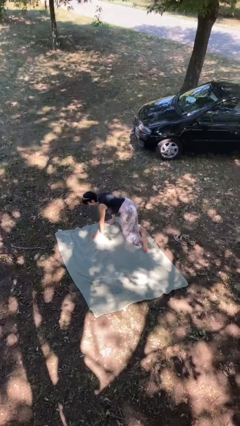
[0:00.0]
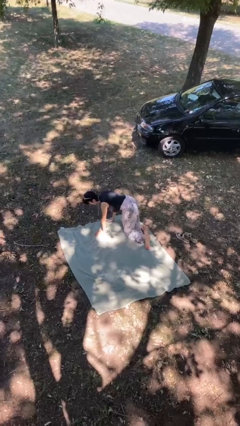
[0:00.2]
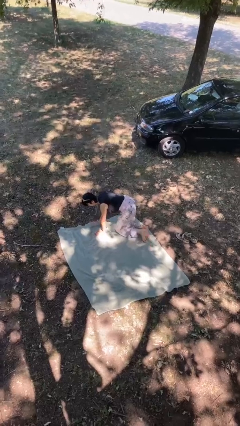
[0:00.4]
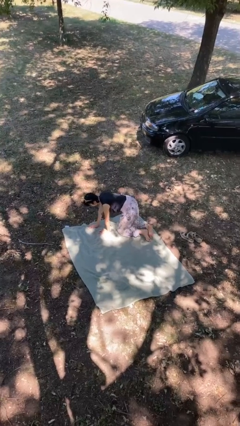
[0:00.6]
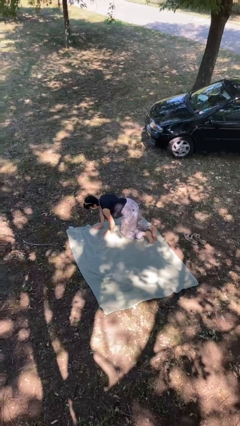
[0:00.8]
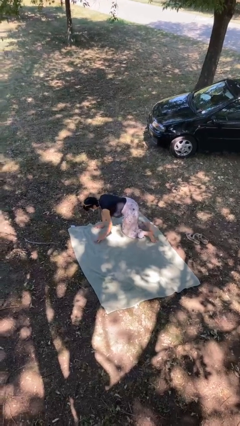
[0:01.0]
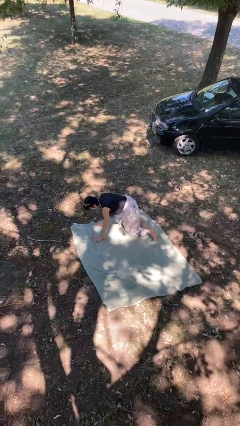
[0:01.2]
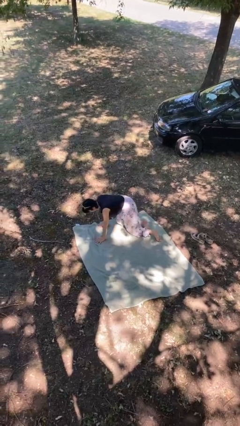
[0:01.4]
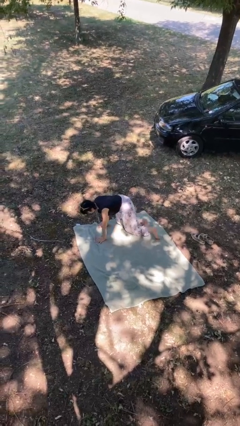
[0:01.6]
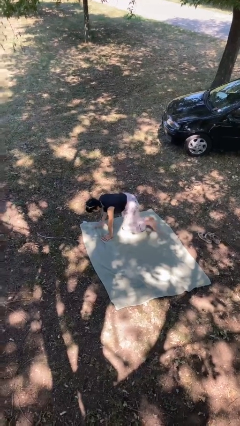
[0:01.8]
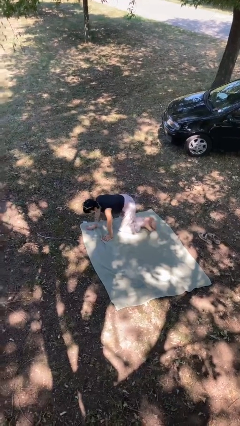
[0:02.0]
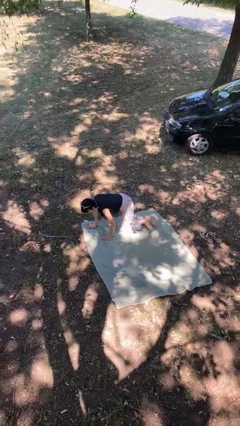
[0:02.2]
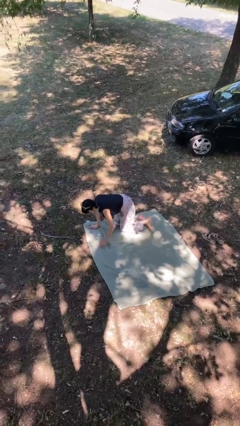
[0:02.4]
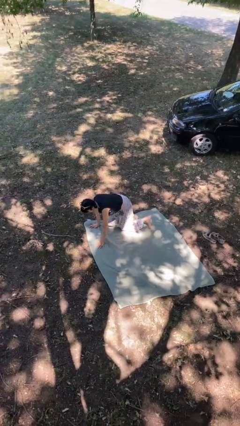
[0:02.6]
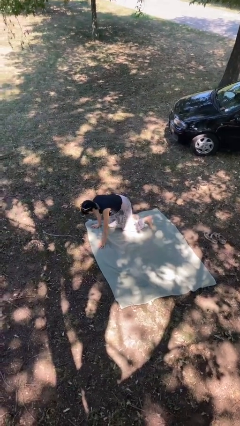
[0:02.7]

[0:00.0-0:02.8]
person crawls

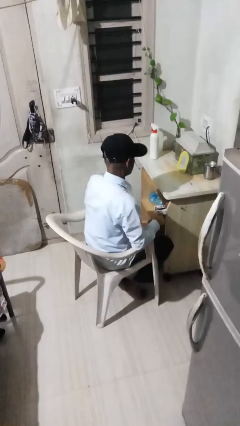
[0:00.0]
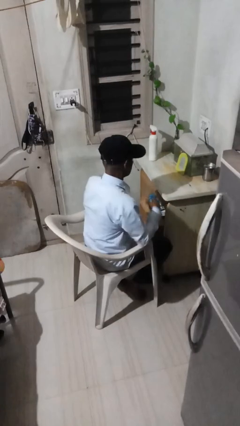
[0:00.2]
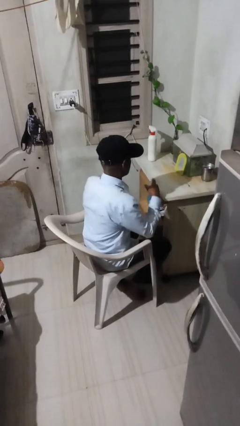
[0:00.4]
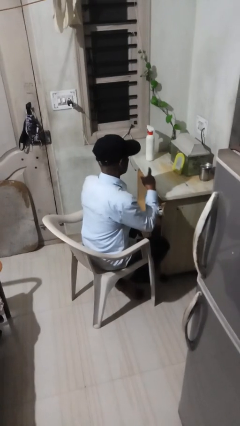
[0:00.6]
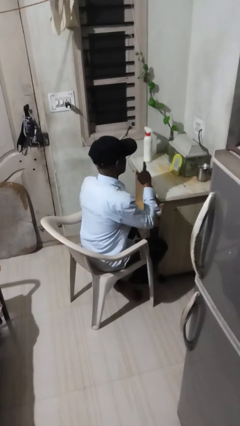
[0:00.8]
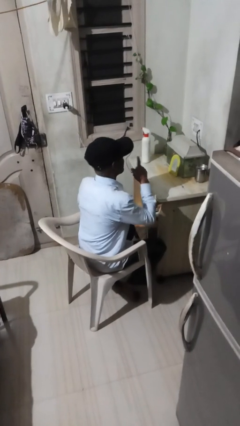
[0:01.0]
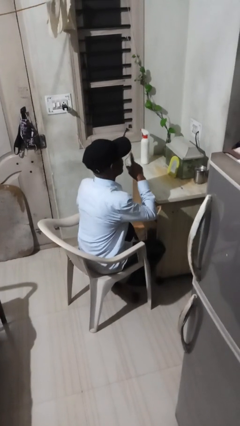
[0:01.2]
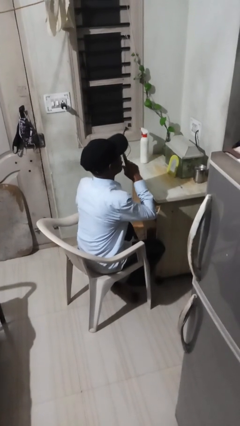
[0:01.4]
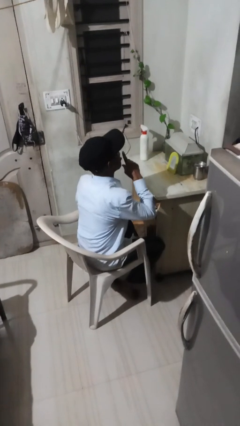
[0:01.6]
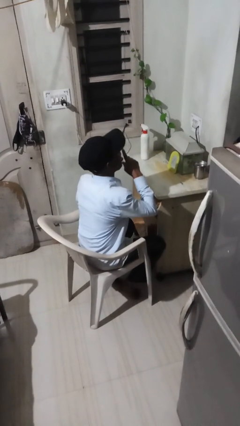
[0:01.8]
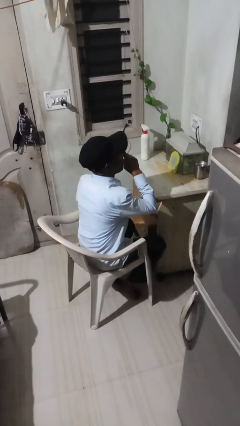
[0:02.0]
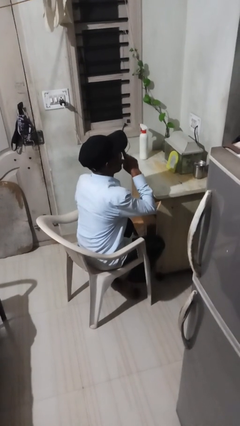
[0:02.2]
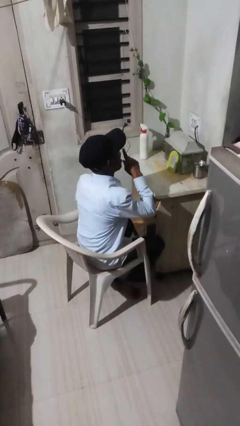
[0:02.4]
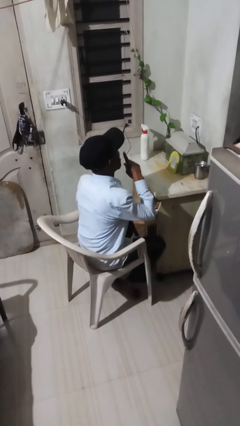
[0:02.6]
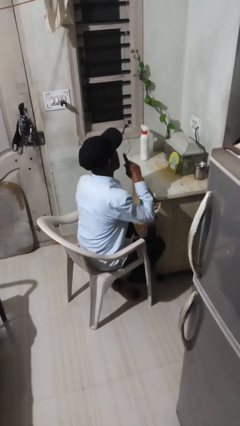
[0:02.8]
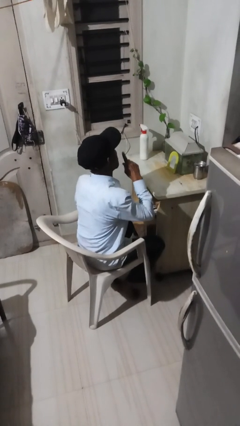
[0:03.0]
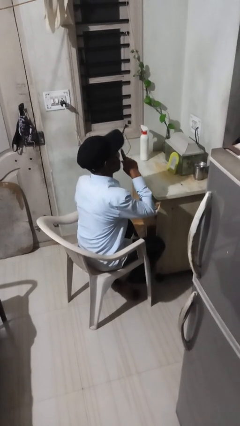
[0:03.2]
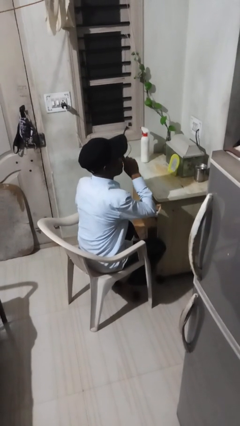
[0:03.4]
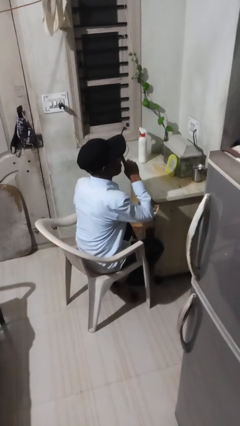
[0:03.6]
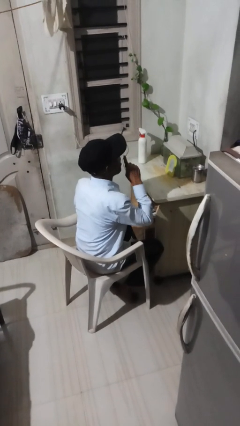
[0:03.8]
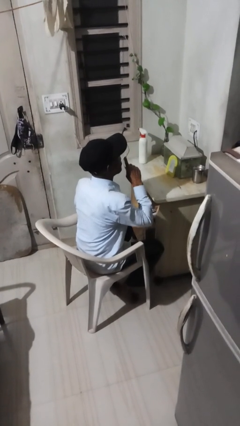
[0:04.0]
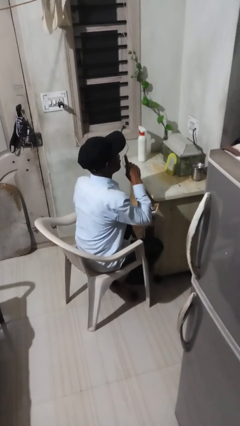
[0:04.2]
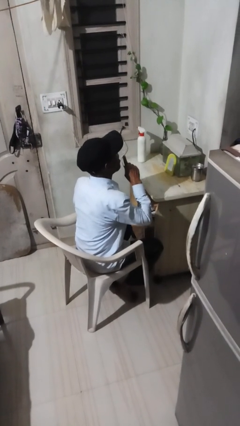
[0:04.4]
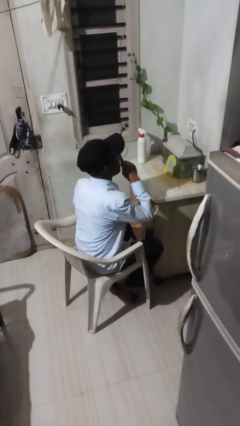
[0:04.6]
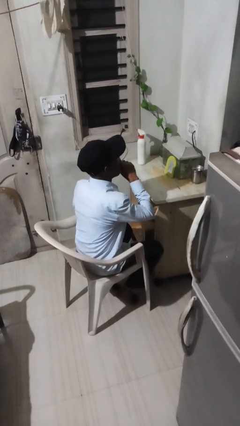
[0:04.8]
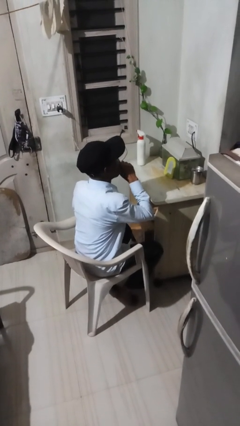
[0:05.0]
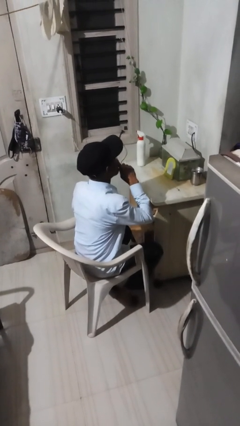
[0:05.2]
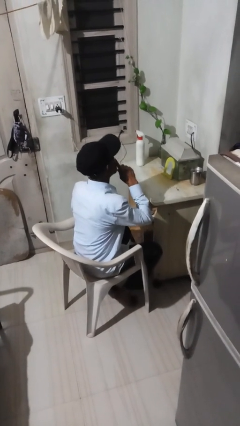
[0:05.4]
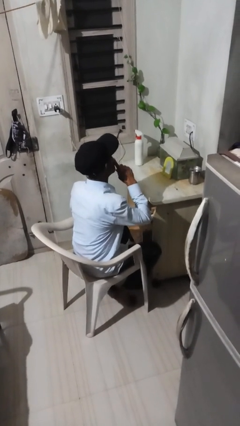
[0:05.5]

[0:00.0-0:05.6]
person licks fingers

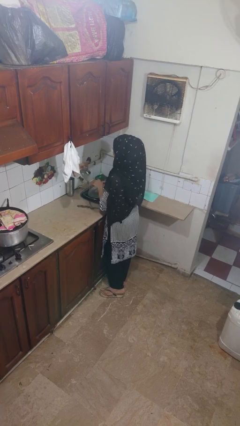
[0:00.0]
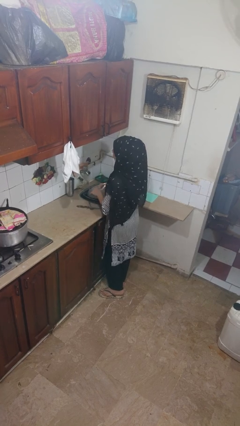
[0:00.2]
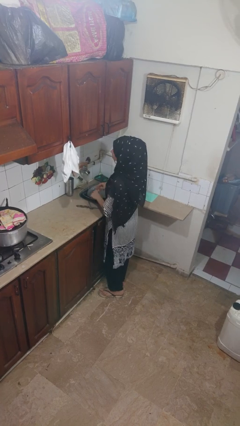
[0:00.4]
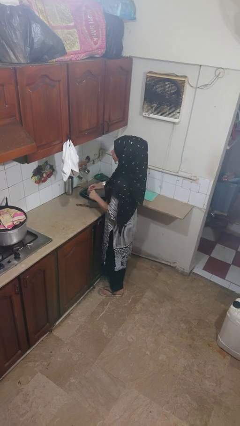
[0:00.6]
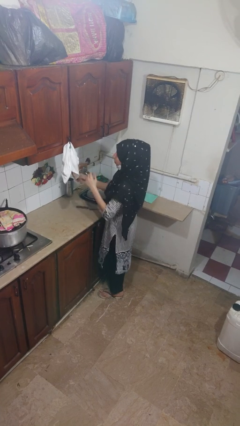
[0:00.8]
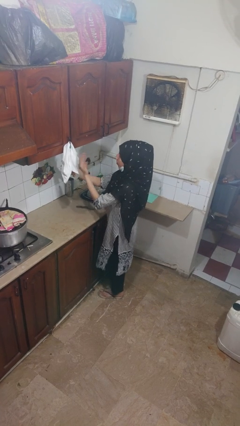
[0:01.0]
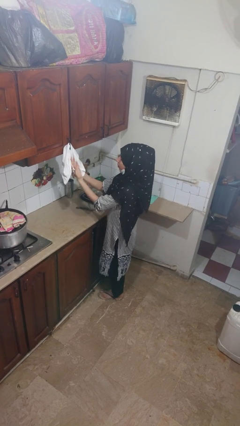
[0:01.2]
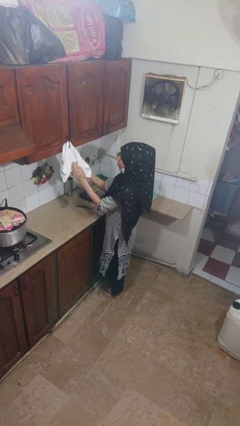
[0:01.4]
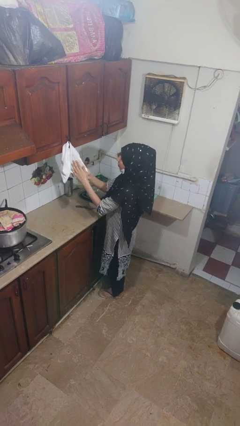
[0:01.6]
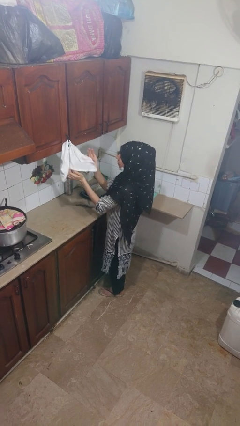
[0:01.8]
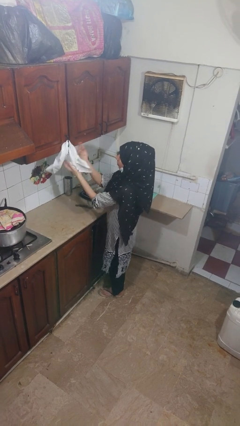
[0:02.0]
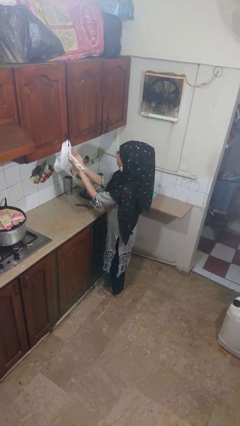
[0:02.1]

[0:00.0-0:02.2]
person dries hands with towel

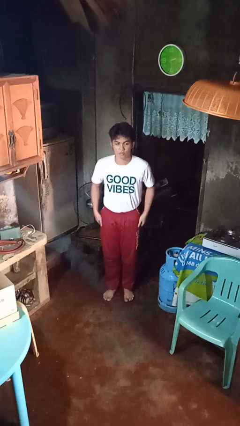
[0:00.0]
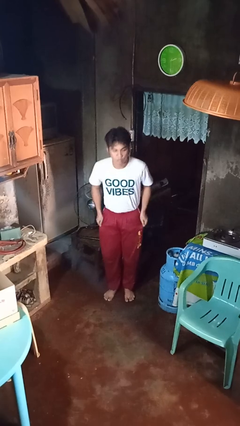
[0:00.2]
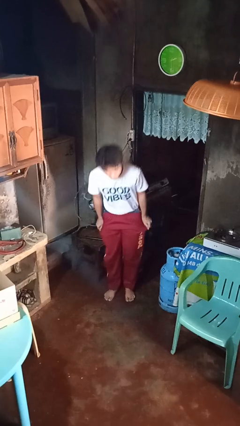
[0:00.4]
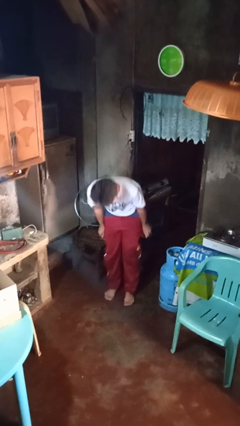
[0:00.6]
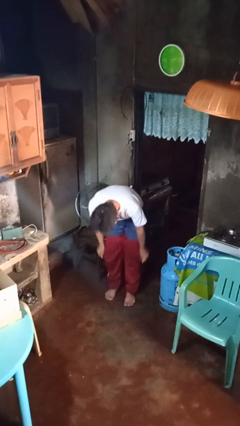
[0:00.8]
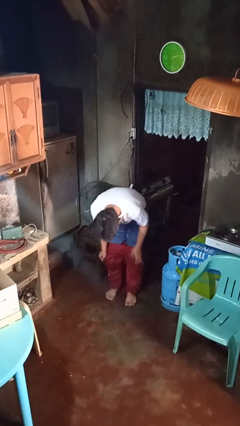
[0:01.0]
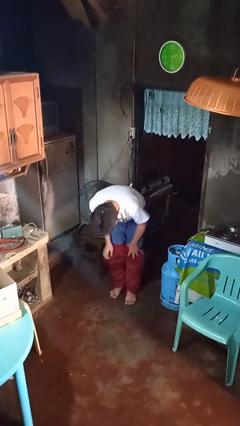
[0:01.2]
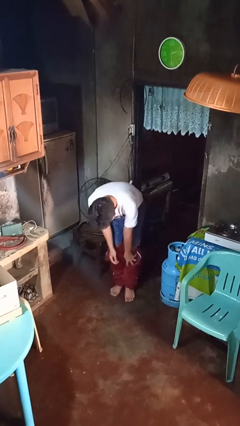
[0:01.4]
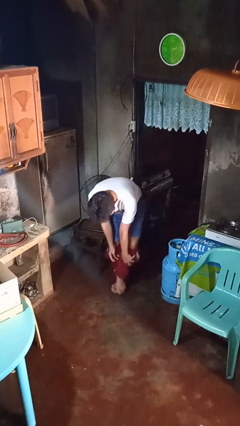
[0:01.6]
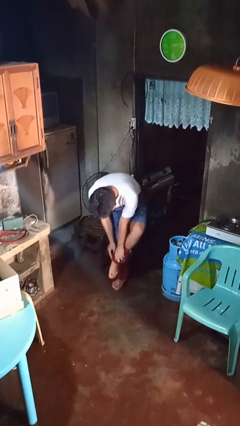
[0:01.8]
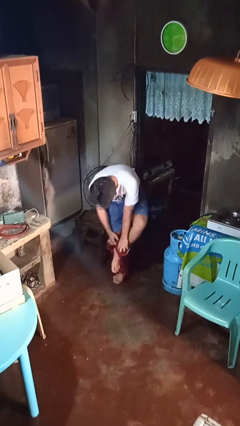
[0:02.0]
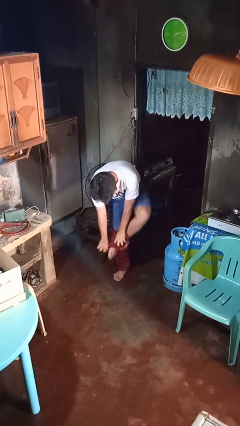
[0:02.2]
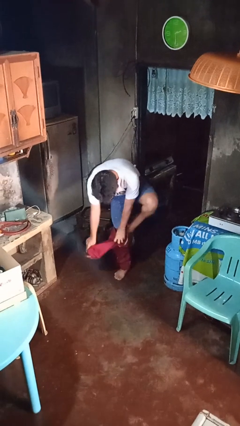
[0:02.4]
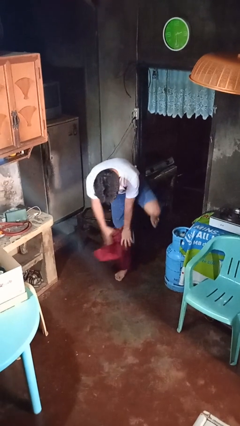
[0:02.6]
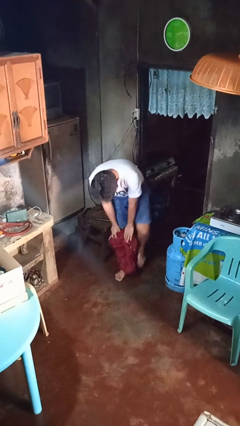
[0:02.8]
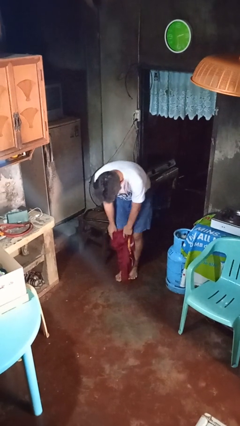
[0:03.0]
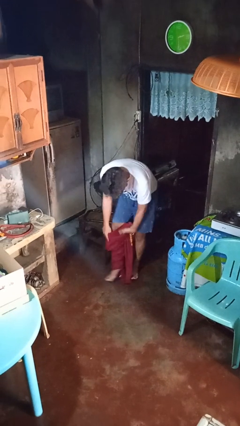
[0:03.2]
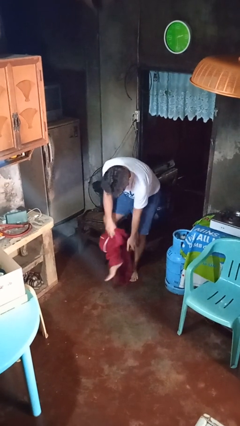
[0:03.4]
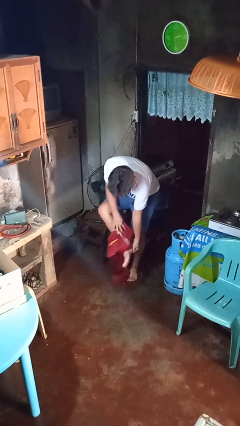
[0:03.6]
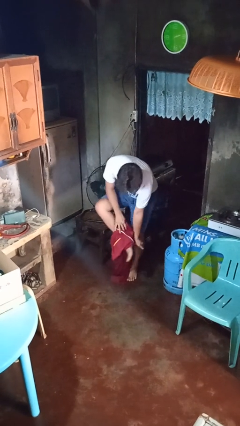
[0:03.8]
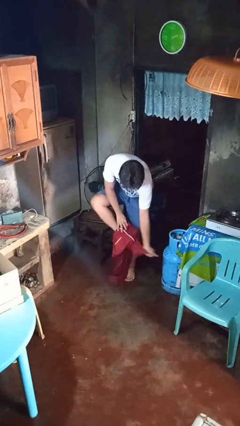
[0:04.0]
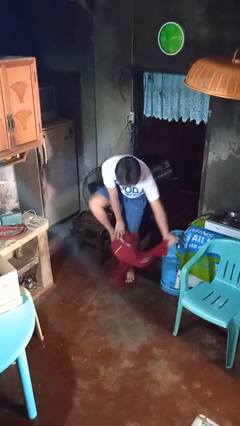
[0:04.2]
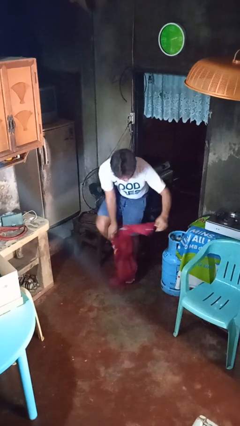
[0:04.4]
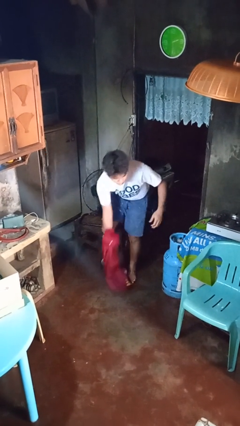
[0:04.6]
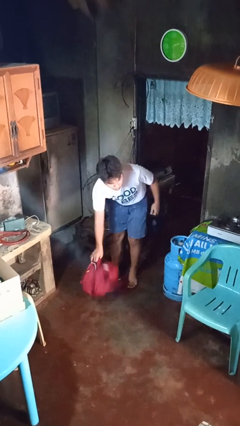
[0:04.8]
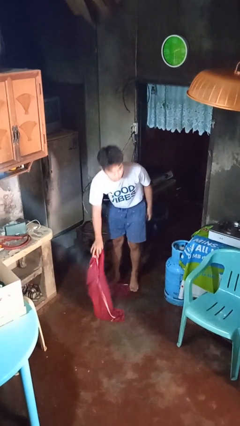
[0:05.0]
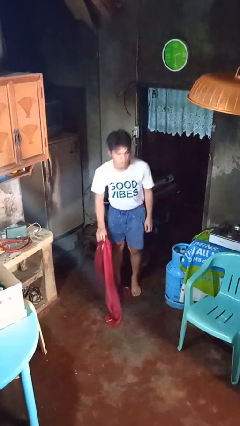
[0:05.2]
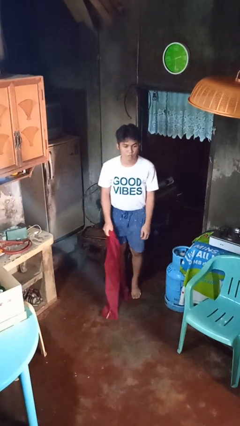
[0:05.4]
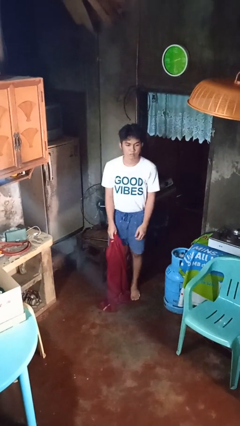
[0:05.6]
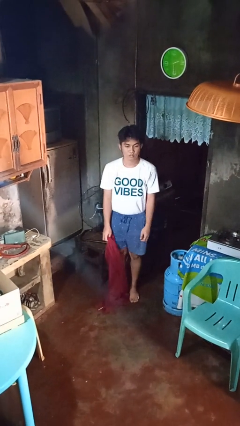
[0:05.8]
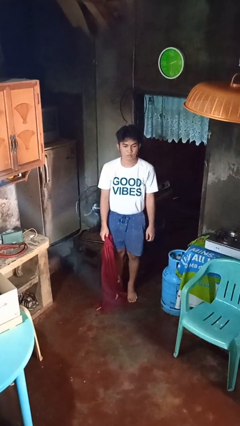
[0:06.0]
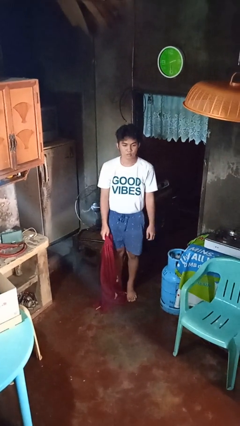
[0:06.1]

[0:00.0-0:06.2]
person takes off pants

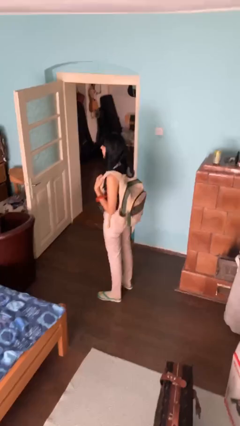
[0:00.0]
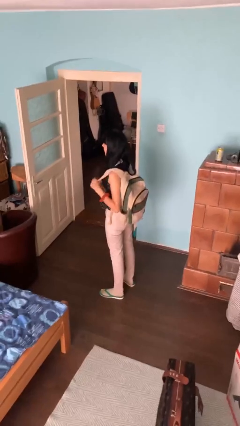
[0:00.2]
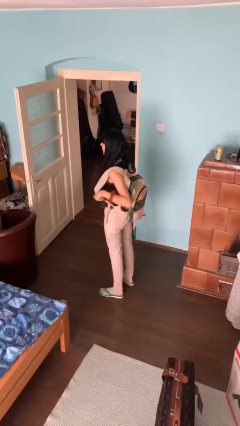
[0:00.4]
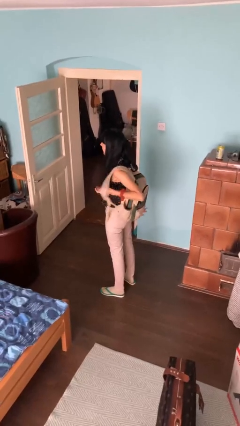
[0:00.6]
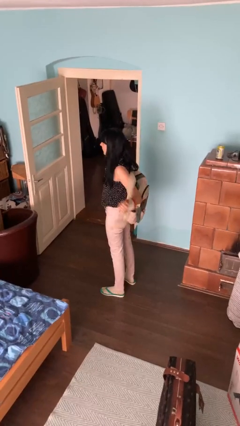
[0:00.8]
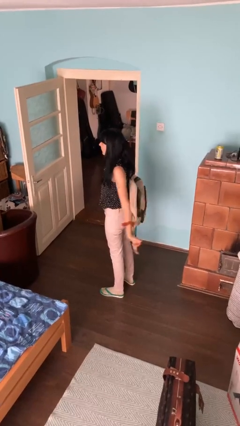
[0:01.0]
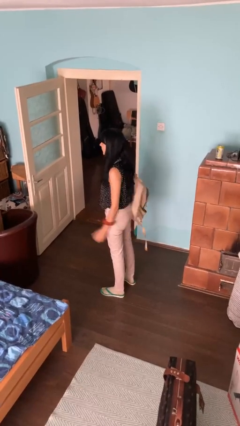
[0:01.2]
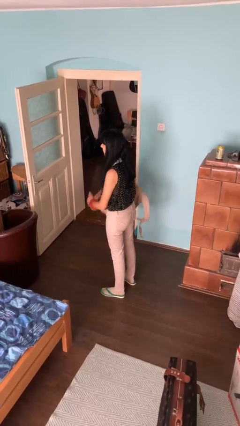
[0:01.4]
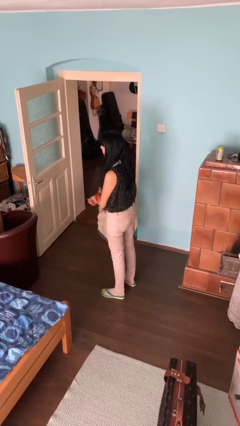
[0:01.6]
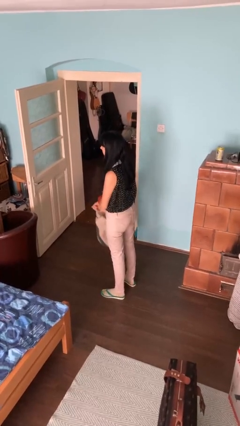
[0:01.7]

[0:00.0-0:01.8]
person takes off backpack
